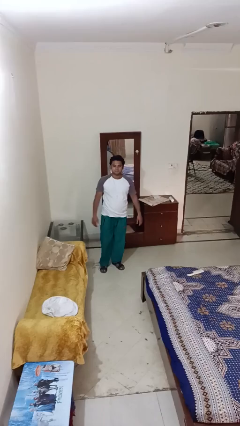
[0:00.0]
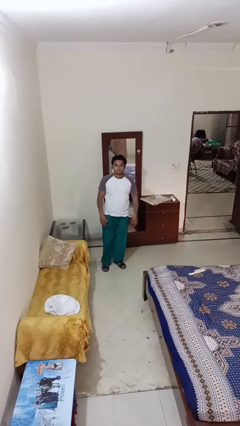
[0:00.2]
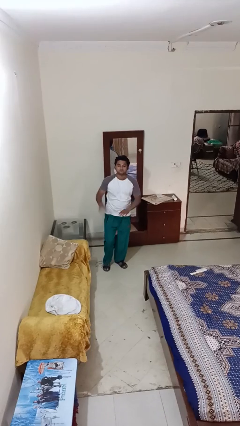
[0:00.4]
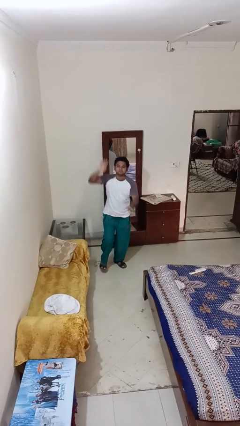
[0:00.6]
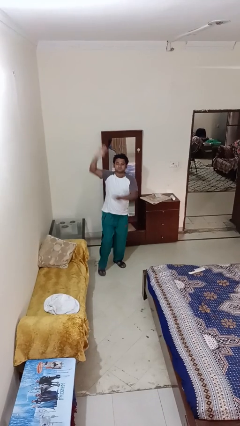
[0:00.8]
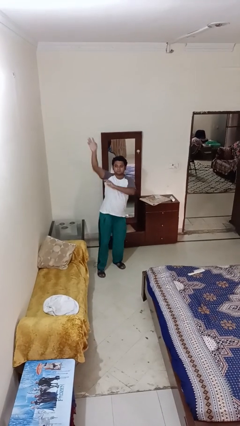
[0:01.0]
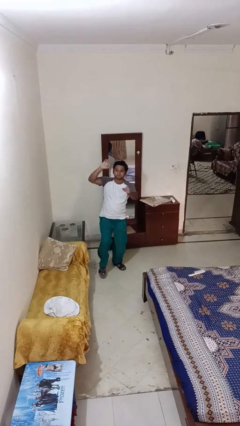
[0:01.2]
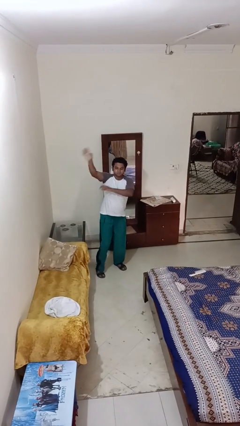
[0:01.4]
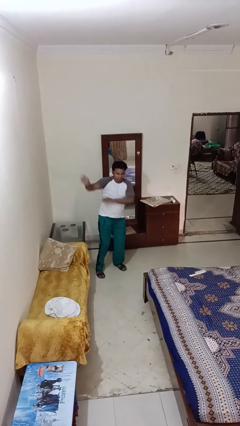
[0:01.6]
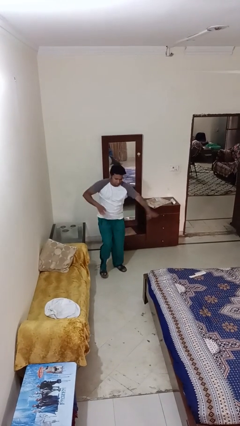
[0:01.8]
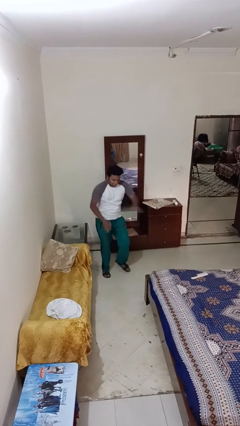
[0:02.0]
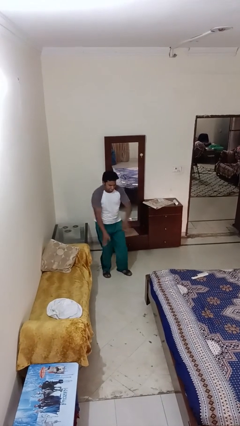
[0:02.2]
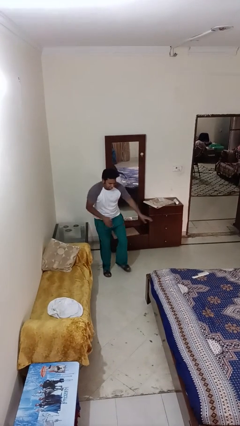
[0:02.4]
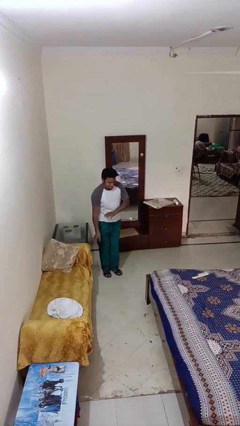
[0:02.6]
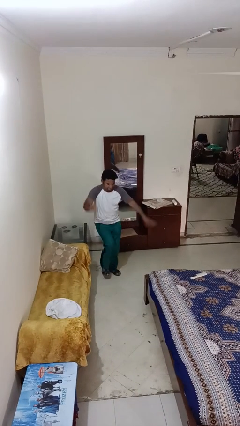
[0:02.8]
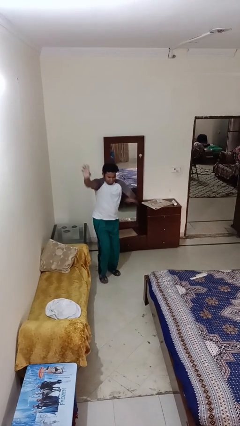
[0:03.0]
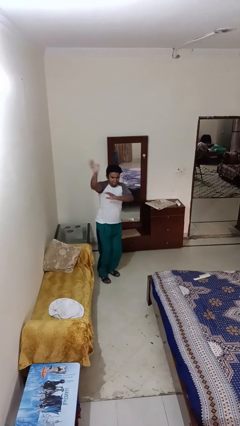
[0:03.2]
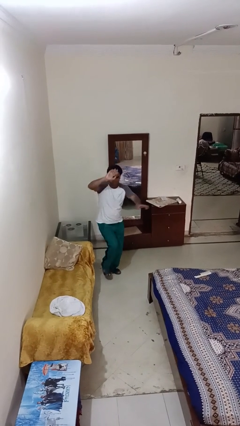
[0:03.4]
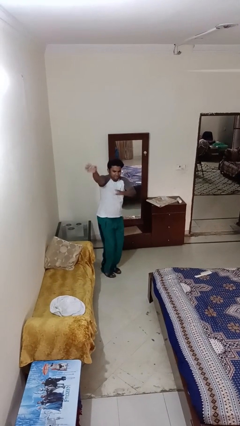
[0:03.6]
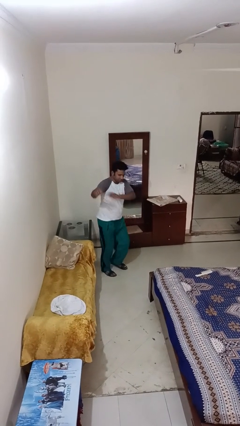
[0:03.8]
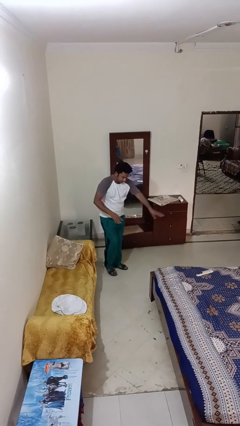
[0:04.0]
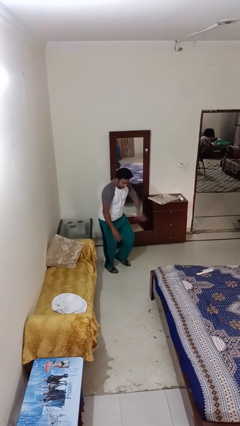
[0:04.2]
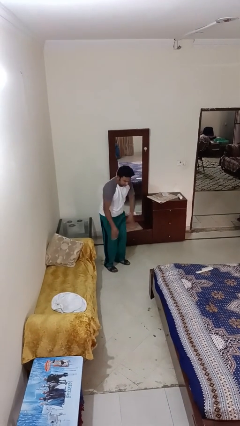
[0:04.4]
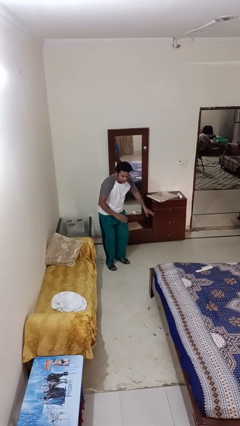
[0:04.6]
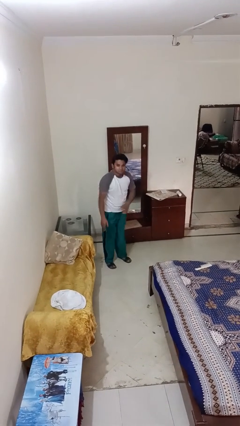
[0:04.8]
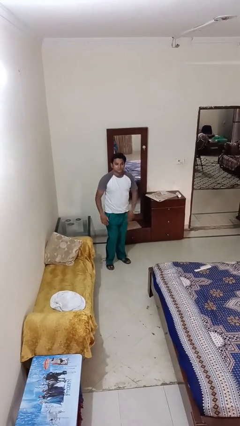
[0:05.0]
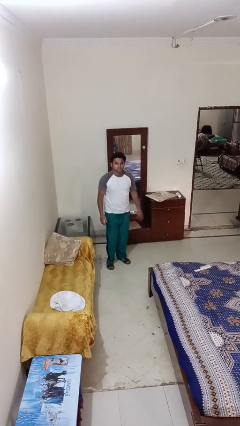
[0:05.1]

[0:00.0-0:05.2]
person dances in place

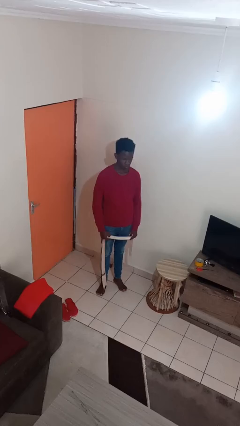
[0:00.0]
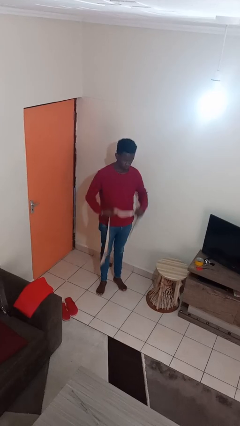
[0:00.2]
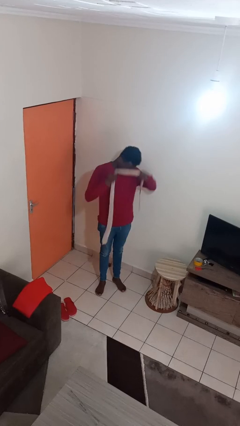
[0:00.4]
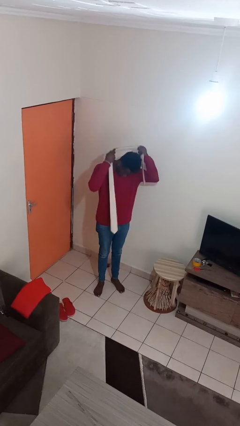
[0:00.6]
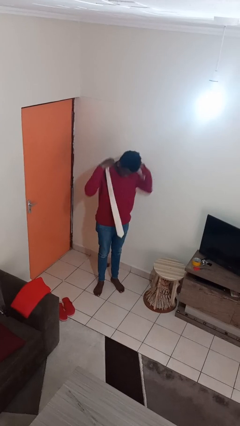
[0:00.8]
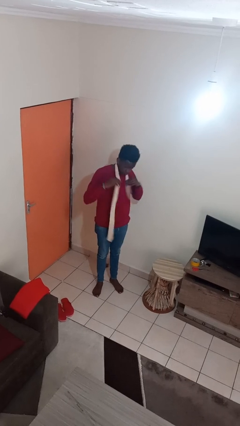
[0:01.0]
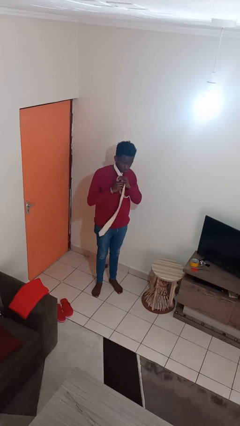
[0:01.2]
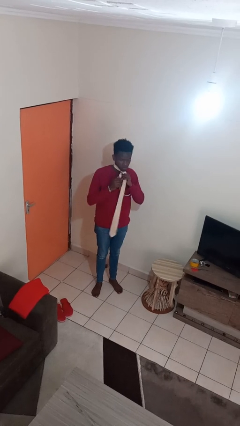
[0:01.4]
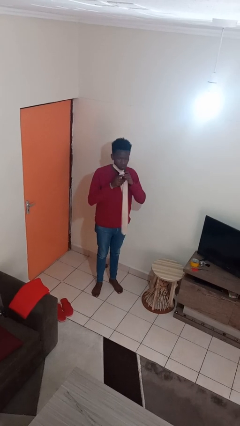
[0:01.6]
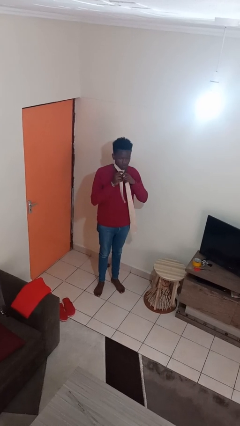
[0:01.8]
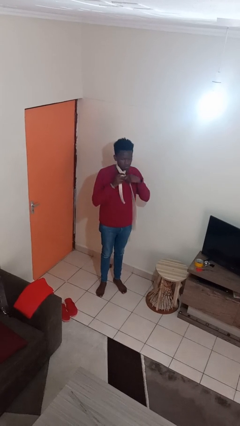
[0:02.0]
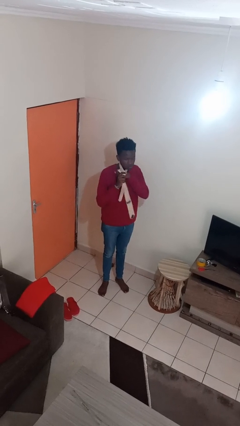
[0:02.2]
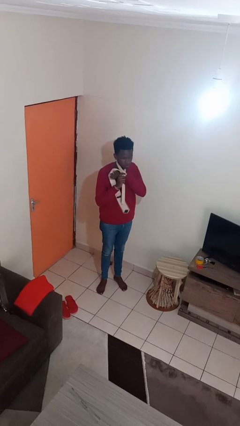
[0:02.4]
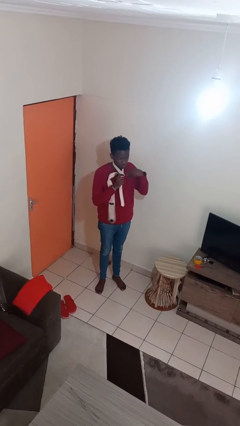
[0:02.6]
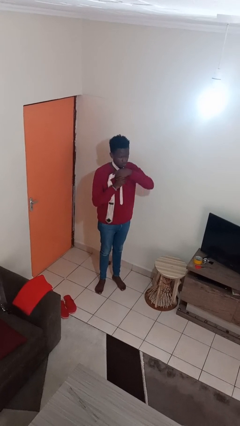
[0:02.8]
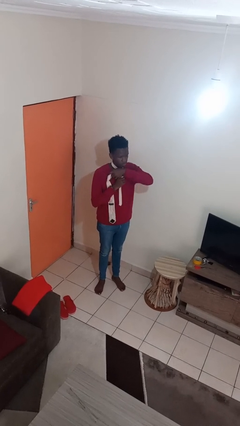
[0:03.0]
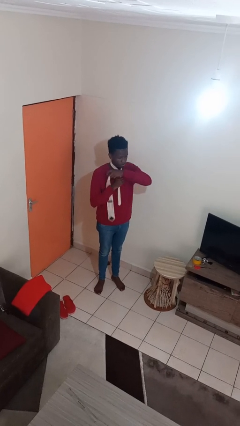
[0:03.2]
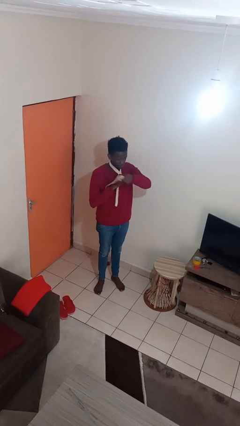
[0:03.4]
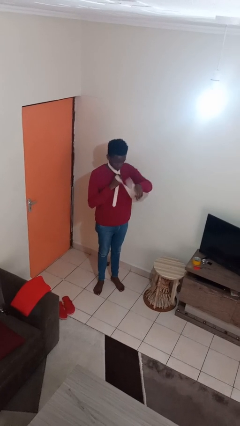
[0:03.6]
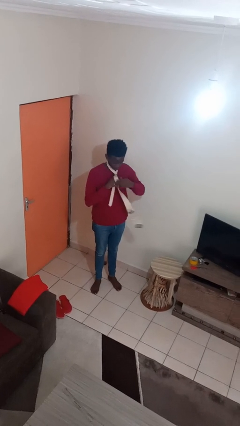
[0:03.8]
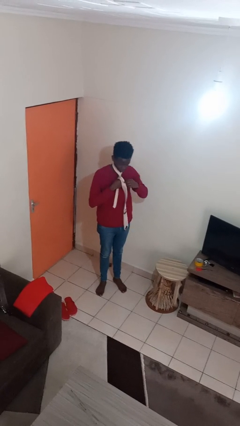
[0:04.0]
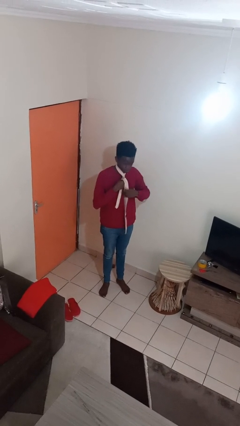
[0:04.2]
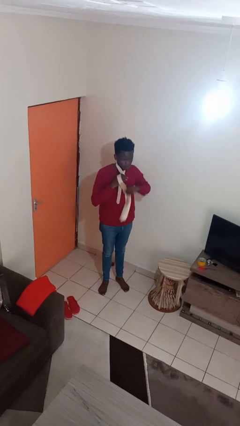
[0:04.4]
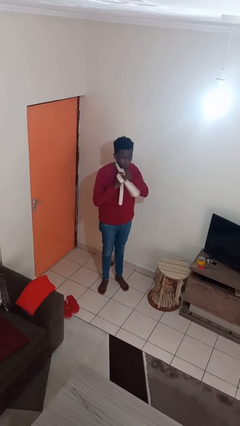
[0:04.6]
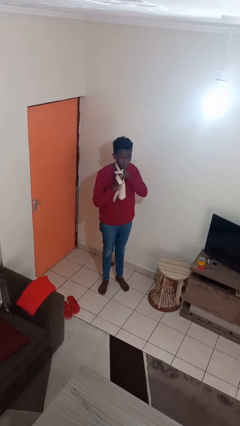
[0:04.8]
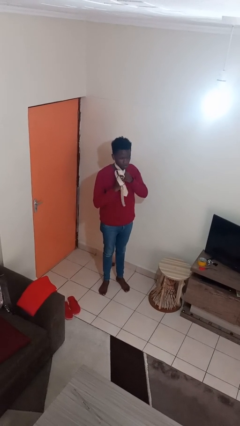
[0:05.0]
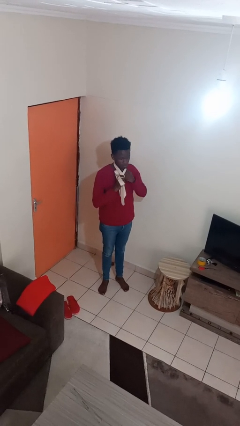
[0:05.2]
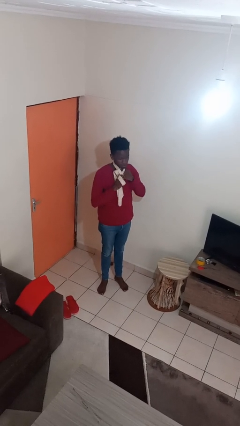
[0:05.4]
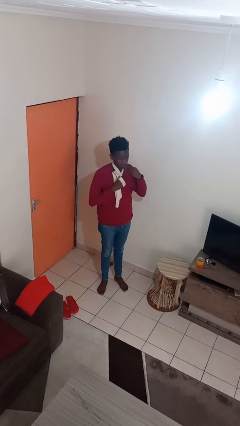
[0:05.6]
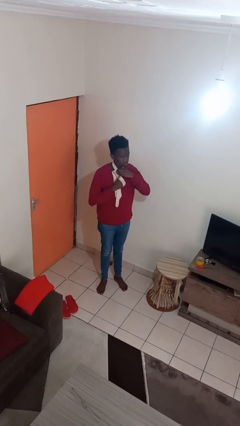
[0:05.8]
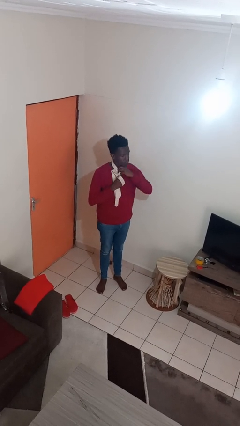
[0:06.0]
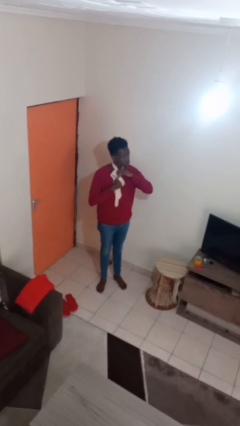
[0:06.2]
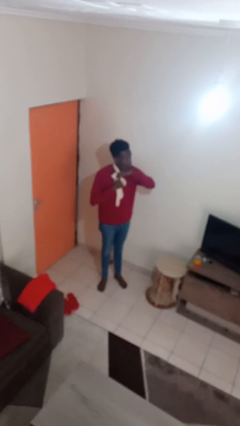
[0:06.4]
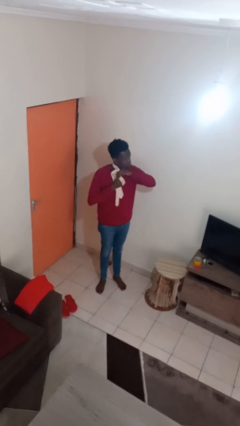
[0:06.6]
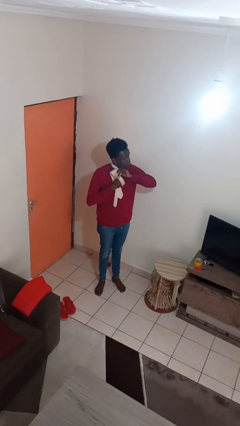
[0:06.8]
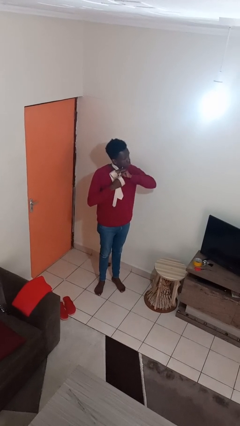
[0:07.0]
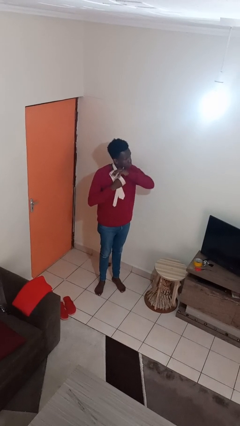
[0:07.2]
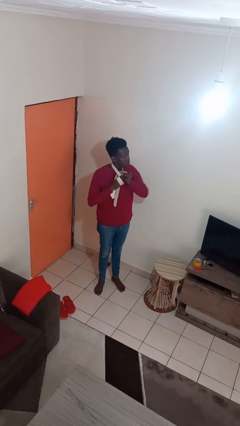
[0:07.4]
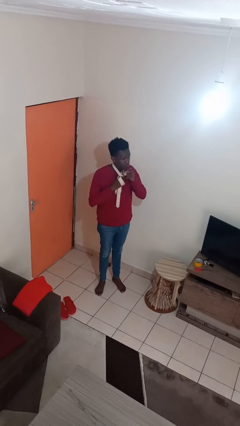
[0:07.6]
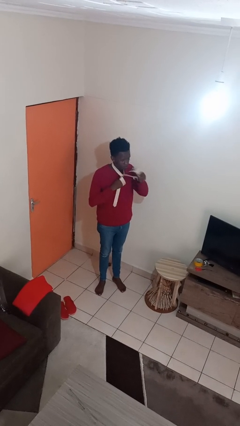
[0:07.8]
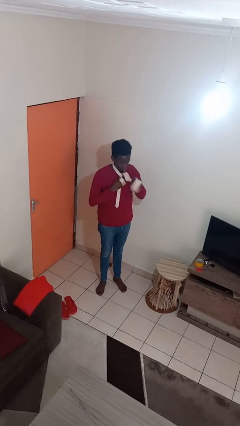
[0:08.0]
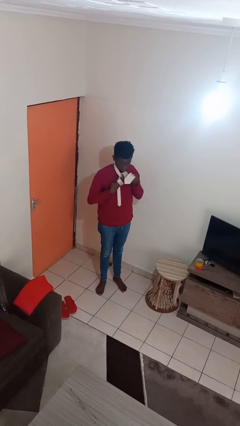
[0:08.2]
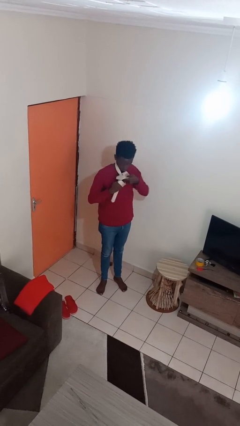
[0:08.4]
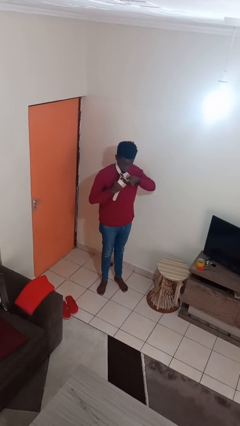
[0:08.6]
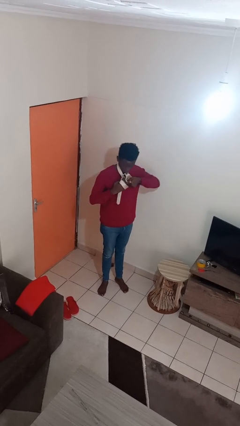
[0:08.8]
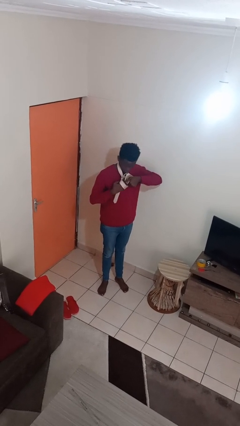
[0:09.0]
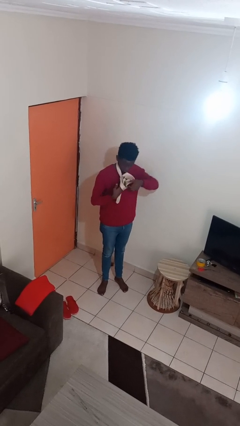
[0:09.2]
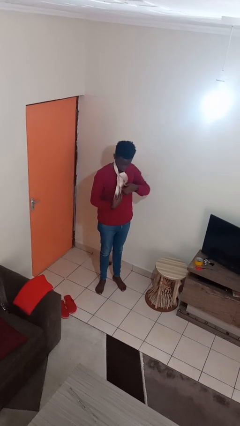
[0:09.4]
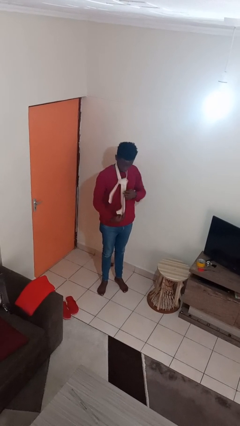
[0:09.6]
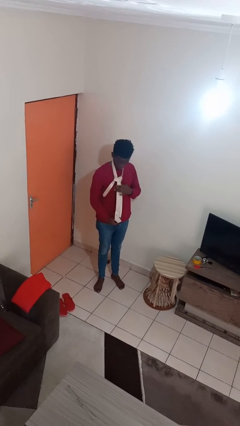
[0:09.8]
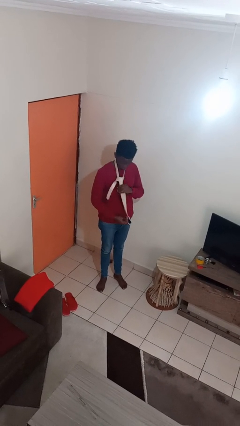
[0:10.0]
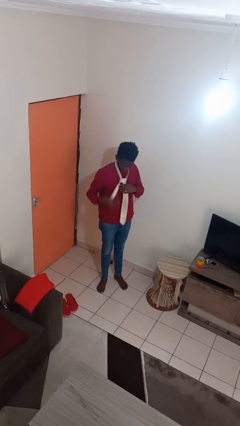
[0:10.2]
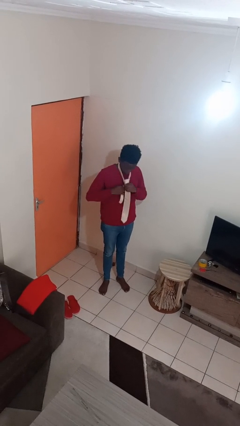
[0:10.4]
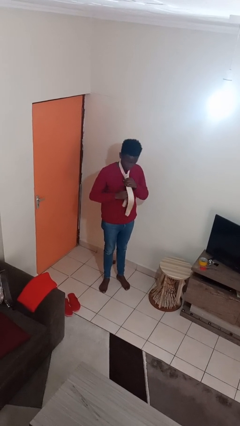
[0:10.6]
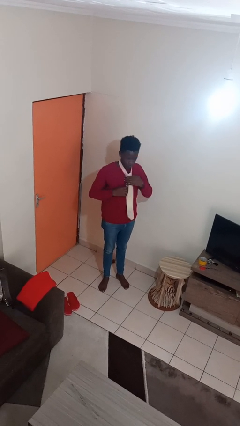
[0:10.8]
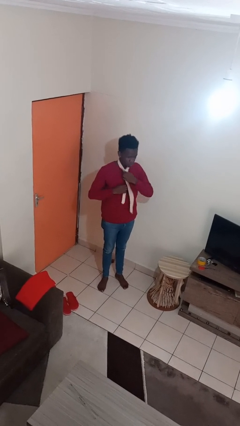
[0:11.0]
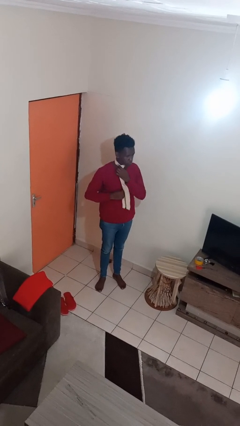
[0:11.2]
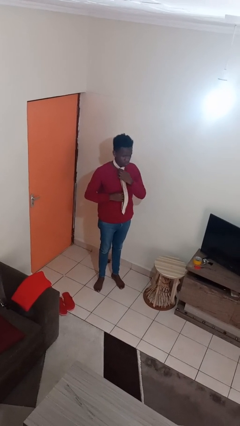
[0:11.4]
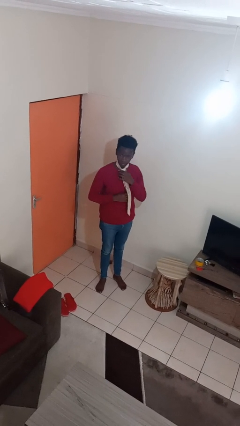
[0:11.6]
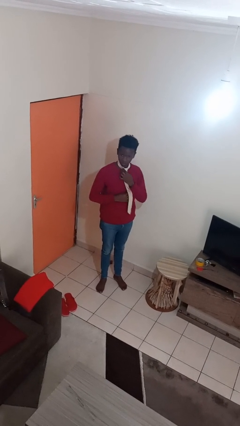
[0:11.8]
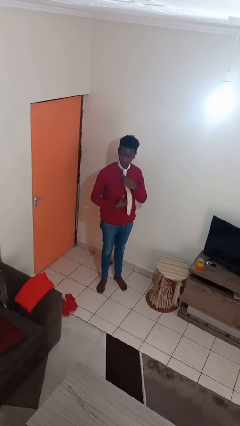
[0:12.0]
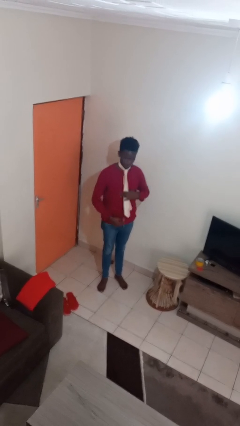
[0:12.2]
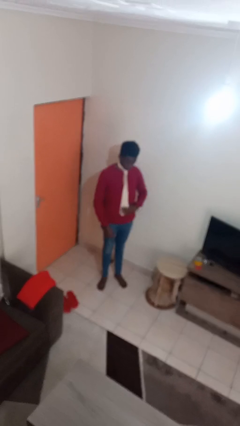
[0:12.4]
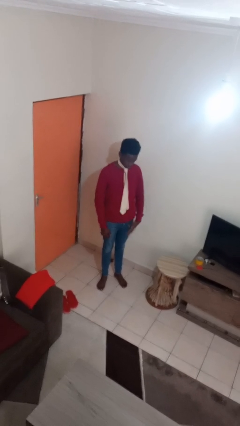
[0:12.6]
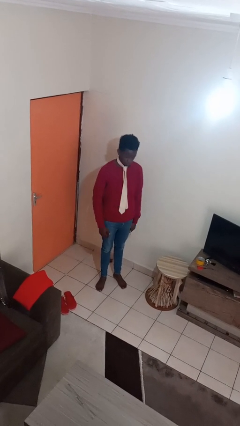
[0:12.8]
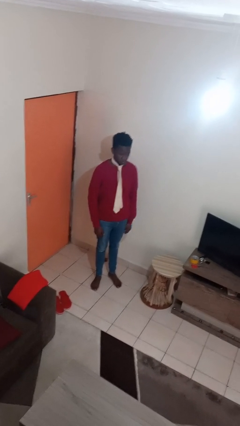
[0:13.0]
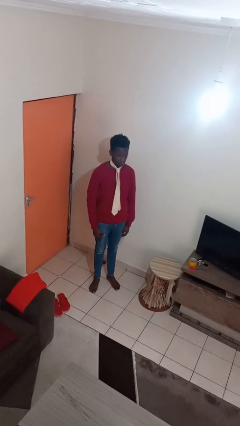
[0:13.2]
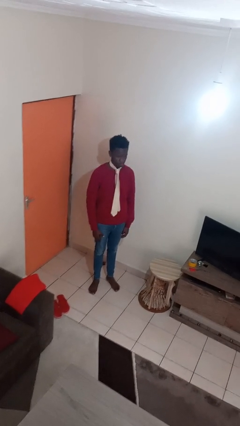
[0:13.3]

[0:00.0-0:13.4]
person puts on necktie
